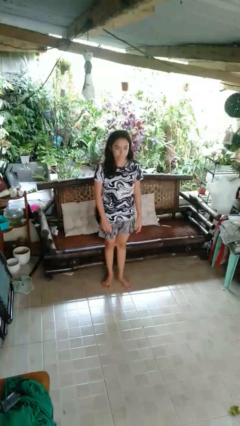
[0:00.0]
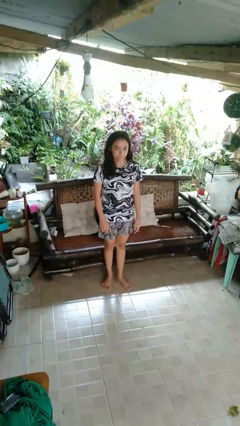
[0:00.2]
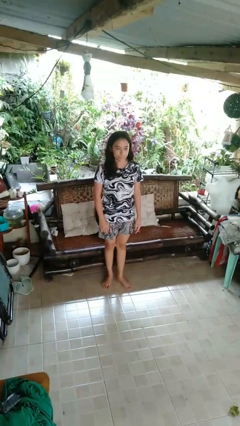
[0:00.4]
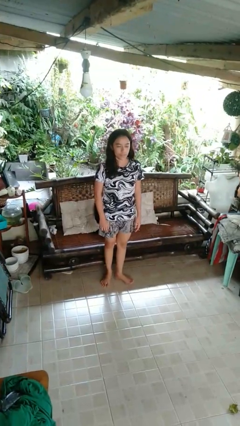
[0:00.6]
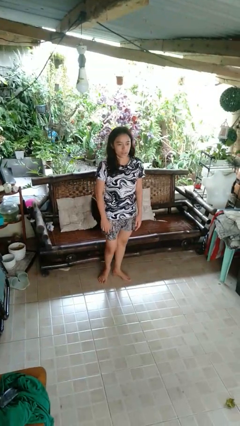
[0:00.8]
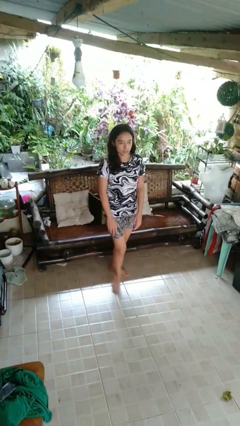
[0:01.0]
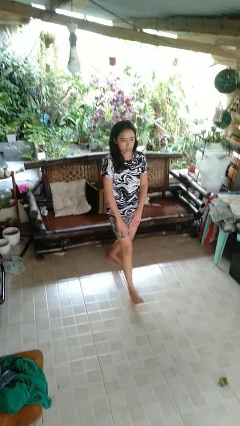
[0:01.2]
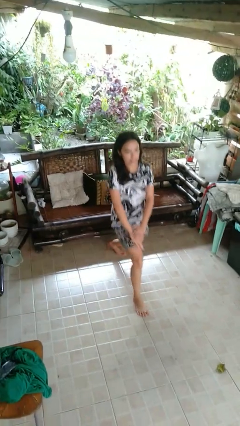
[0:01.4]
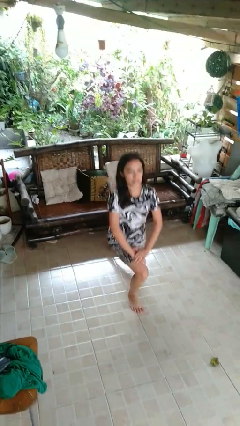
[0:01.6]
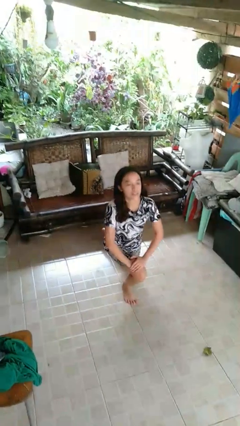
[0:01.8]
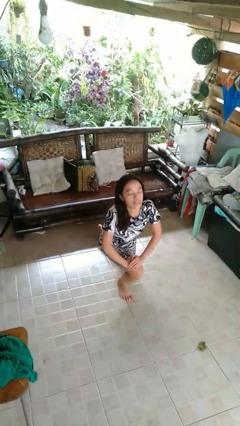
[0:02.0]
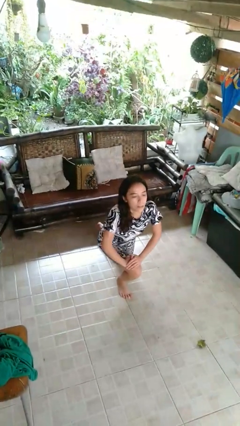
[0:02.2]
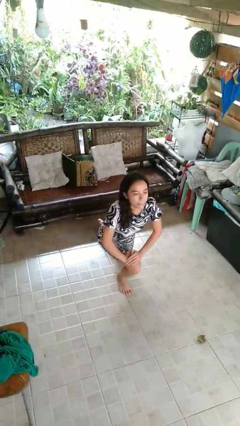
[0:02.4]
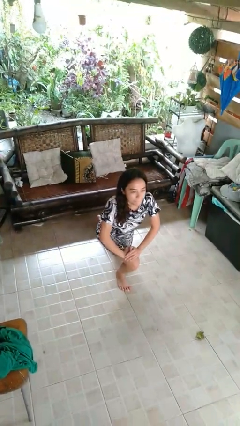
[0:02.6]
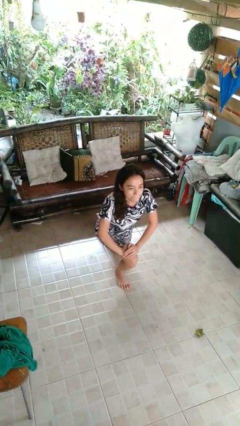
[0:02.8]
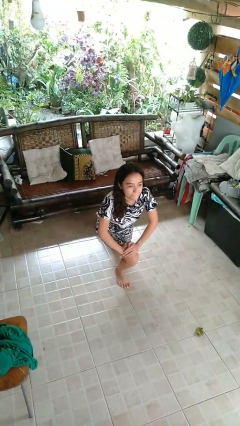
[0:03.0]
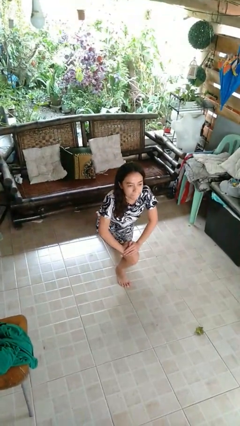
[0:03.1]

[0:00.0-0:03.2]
person exercises with lunges

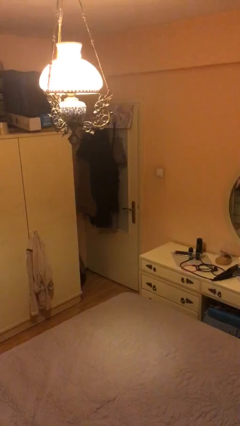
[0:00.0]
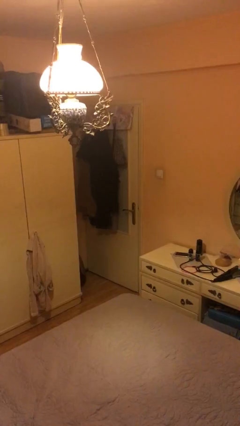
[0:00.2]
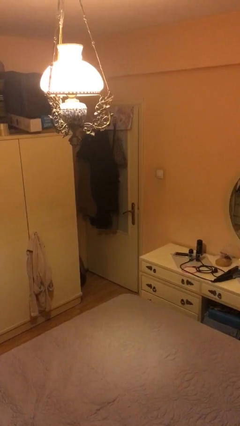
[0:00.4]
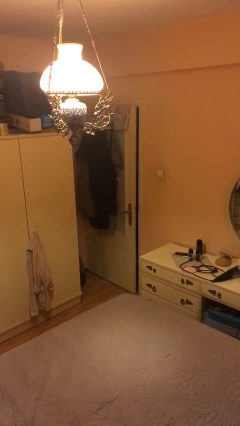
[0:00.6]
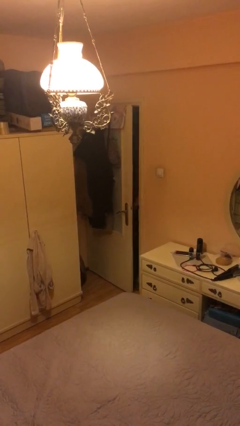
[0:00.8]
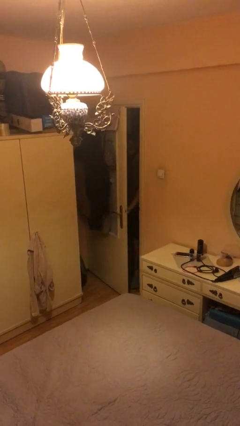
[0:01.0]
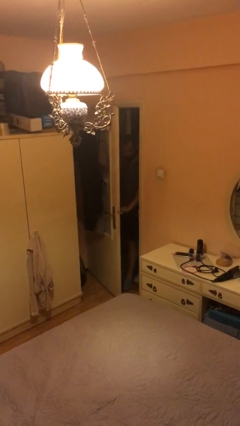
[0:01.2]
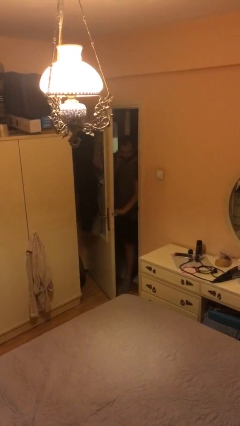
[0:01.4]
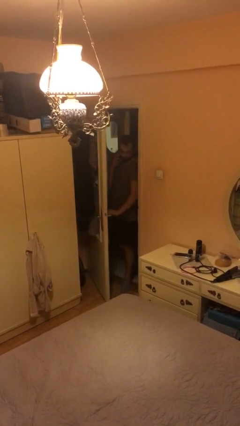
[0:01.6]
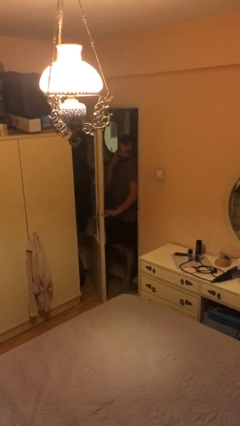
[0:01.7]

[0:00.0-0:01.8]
person opens facility door

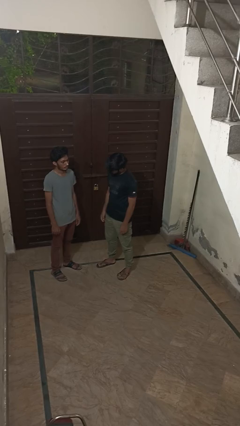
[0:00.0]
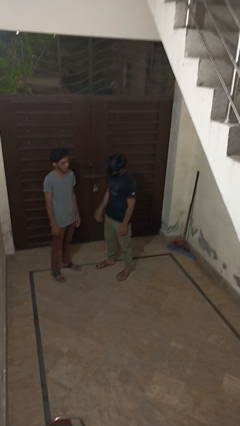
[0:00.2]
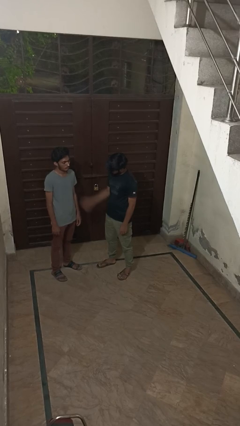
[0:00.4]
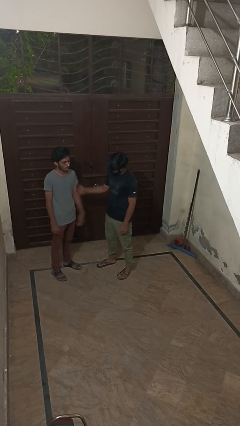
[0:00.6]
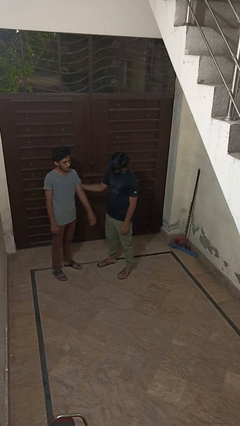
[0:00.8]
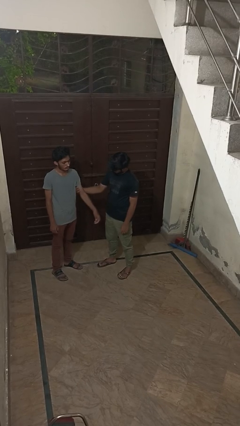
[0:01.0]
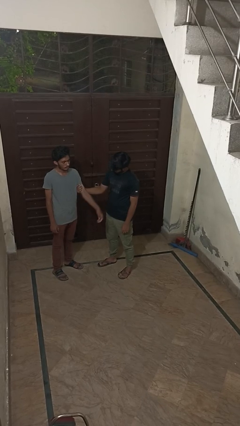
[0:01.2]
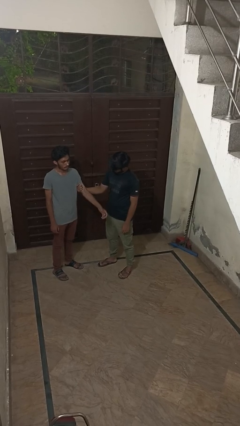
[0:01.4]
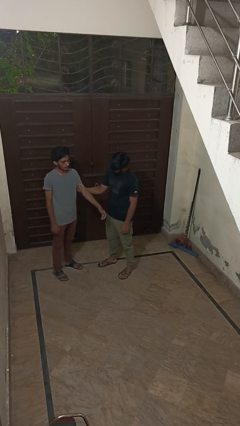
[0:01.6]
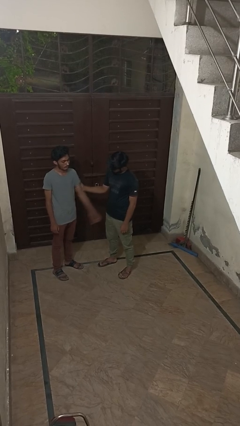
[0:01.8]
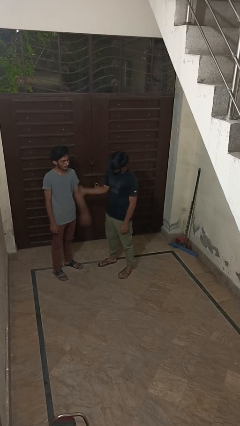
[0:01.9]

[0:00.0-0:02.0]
person grabs person by bicep

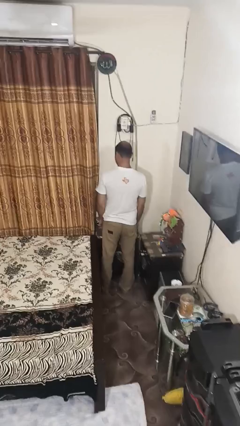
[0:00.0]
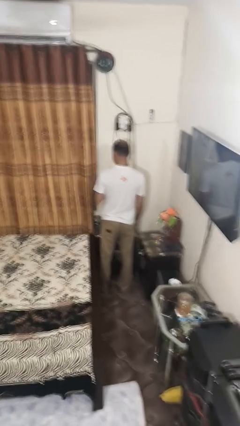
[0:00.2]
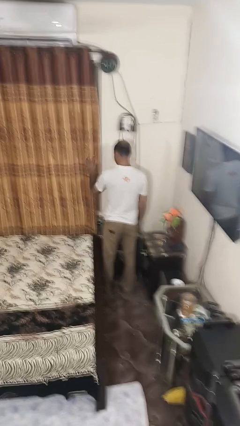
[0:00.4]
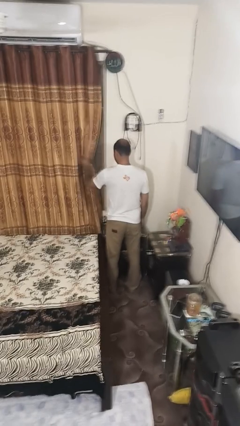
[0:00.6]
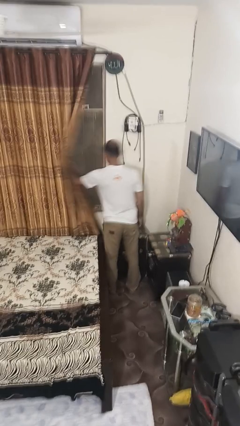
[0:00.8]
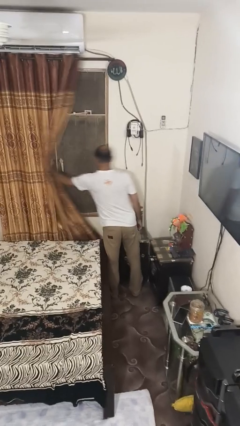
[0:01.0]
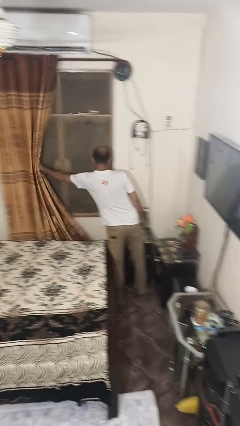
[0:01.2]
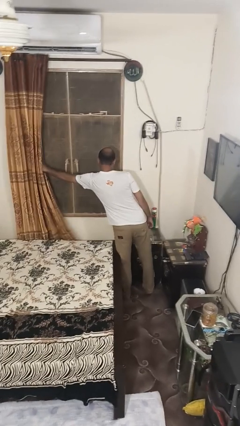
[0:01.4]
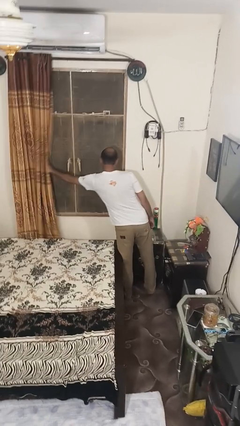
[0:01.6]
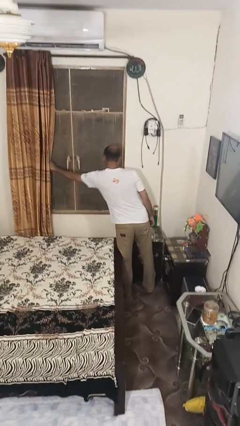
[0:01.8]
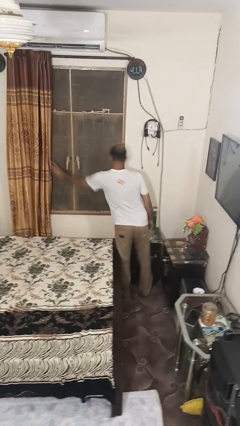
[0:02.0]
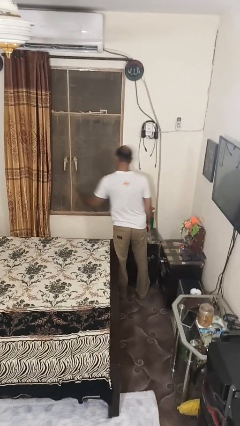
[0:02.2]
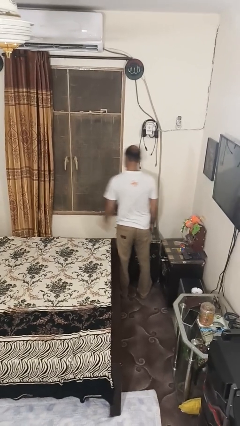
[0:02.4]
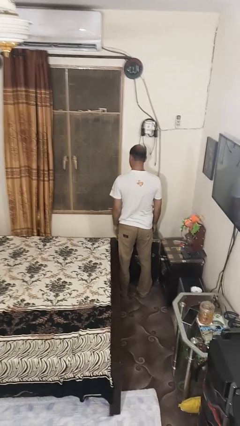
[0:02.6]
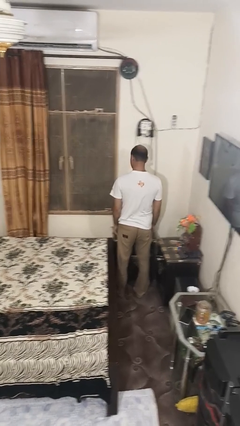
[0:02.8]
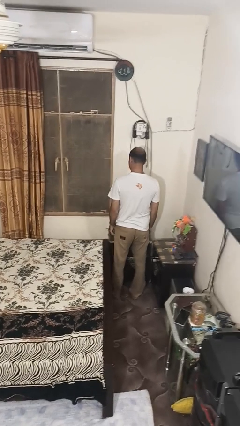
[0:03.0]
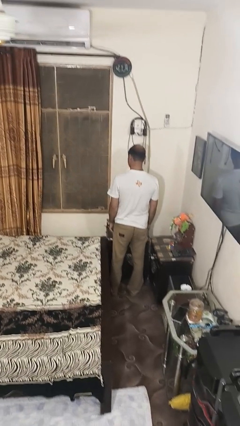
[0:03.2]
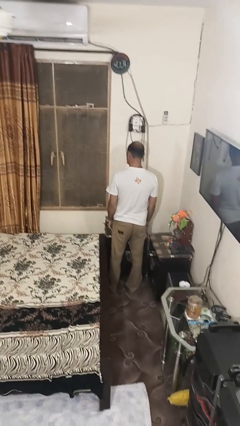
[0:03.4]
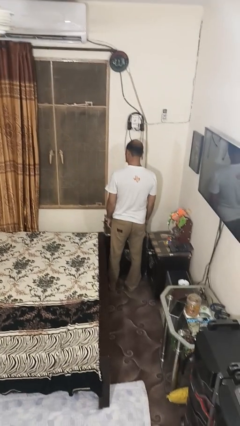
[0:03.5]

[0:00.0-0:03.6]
person opens curtains

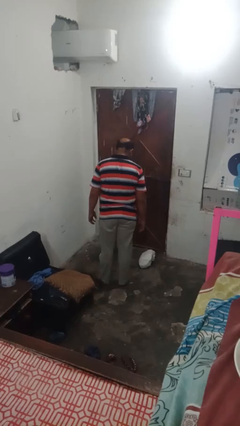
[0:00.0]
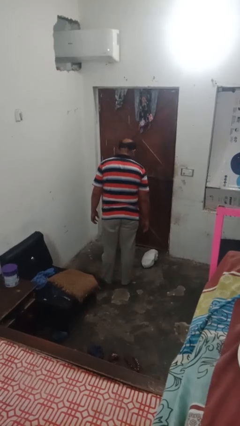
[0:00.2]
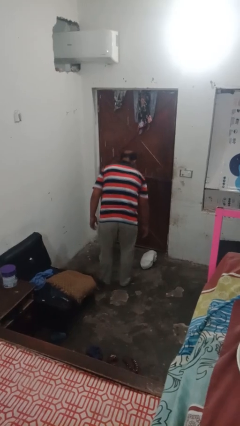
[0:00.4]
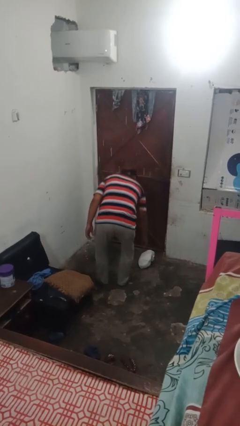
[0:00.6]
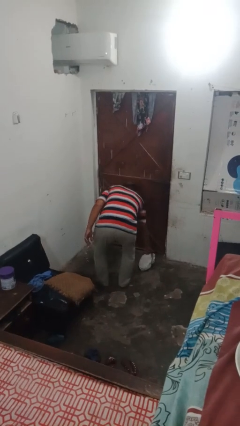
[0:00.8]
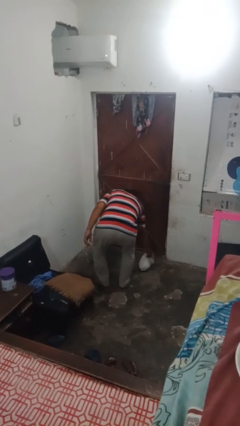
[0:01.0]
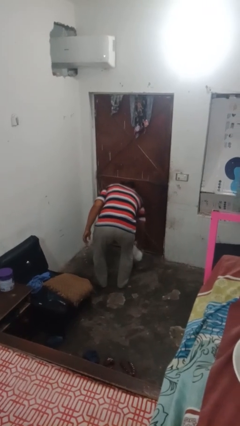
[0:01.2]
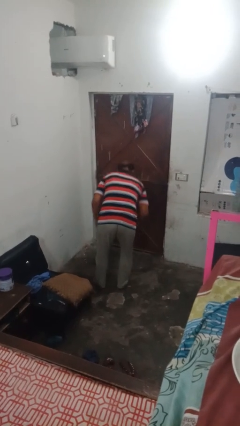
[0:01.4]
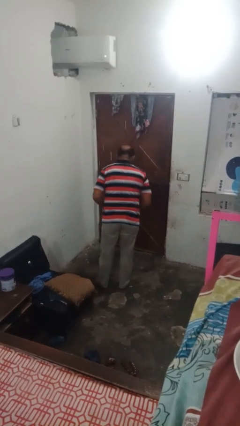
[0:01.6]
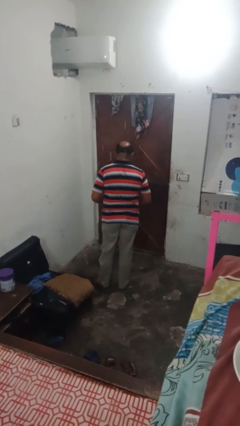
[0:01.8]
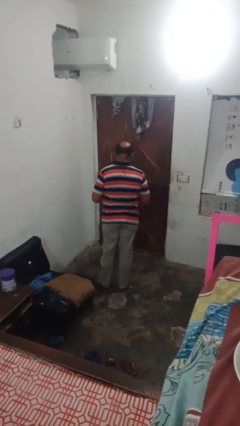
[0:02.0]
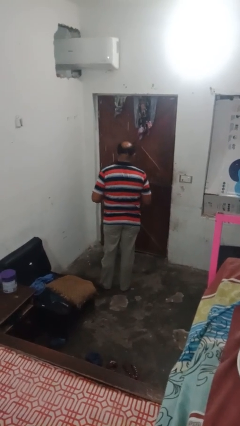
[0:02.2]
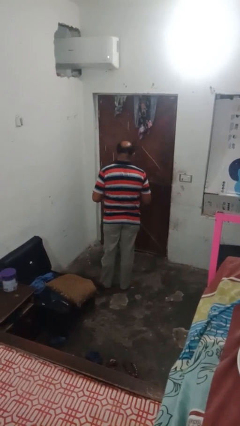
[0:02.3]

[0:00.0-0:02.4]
person picks up object from floor

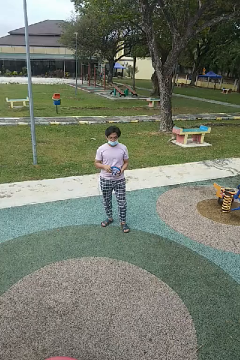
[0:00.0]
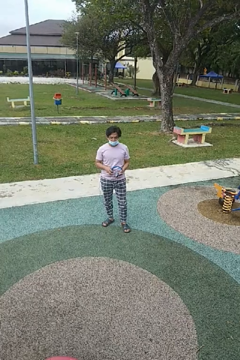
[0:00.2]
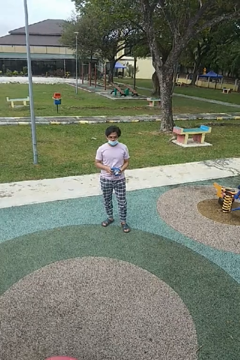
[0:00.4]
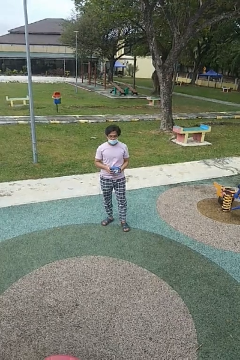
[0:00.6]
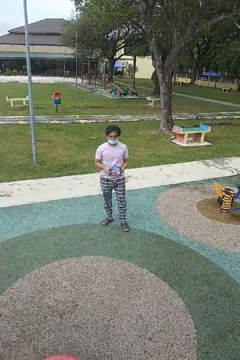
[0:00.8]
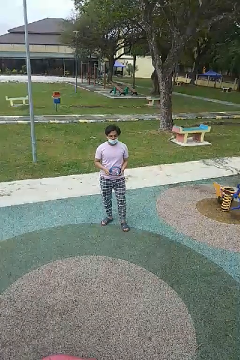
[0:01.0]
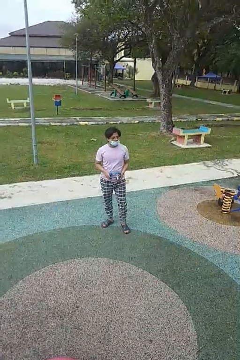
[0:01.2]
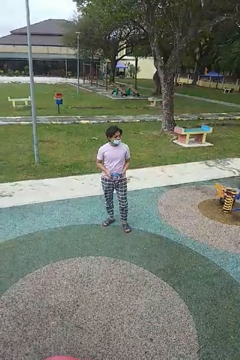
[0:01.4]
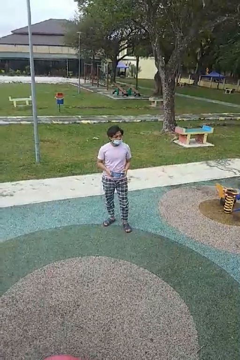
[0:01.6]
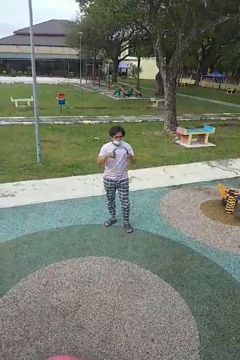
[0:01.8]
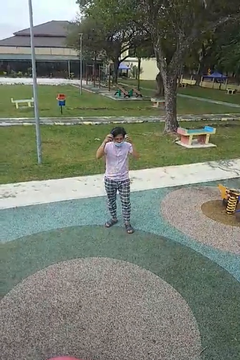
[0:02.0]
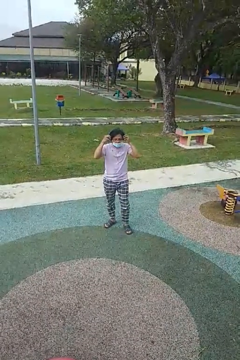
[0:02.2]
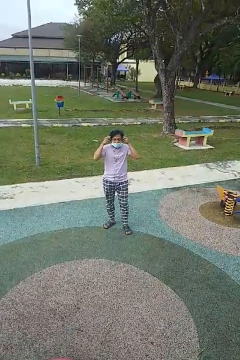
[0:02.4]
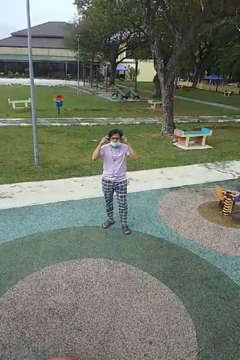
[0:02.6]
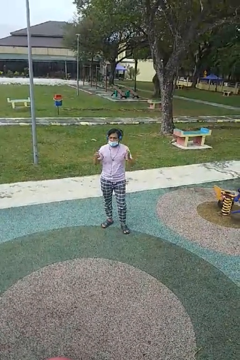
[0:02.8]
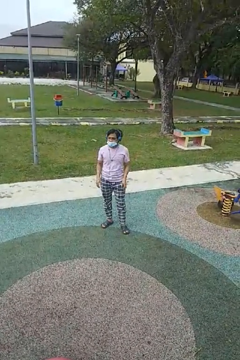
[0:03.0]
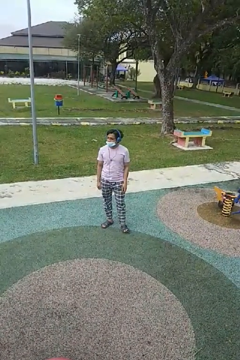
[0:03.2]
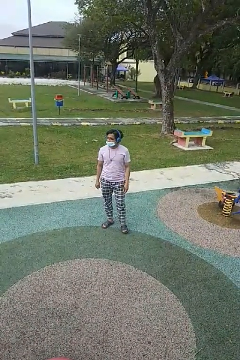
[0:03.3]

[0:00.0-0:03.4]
person puts on headphones

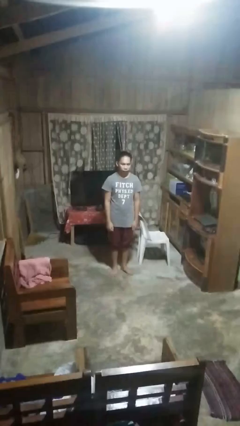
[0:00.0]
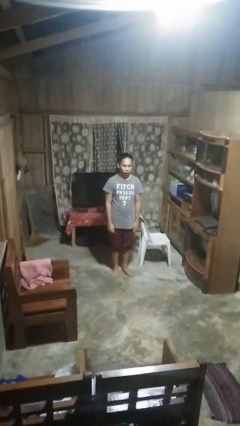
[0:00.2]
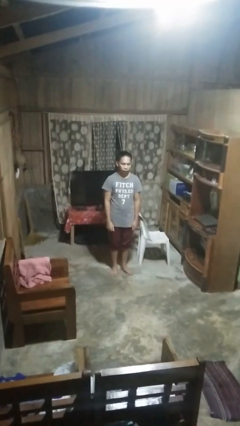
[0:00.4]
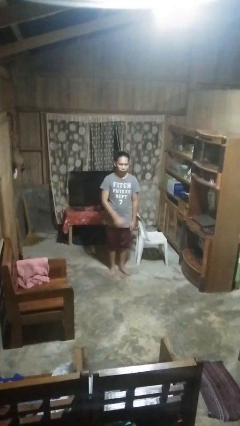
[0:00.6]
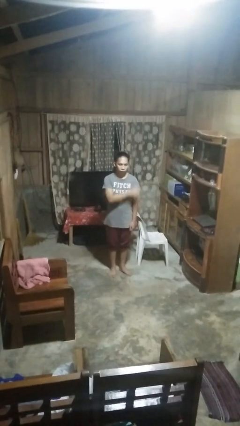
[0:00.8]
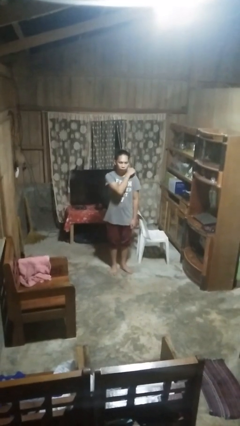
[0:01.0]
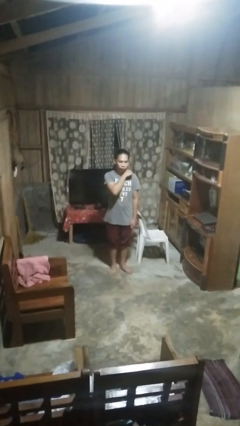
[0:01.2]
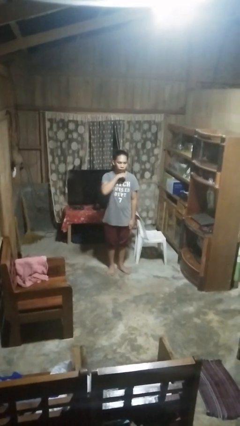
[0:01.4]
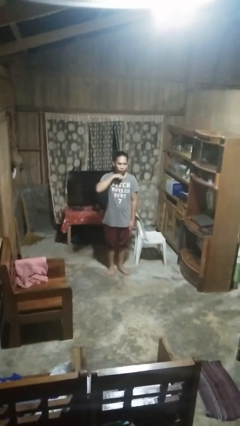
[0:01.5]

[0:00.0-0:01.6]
person gestures cut
